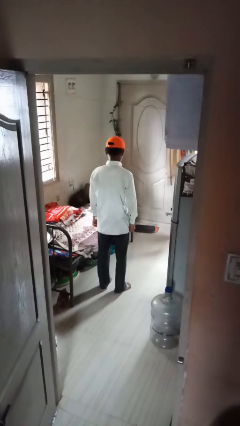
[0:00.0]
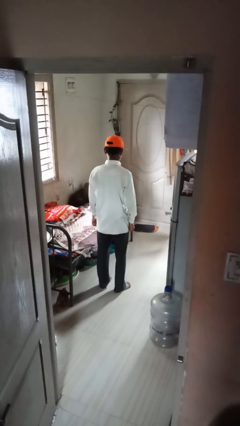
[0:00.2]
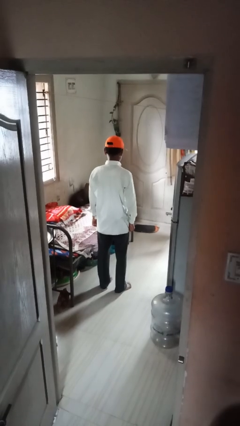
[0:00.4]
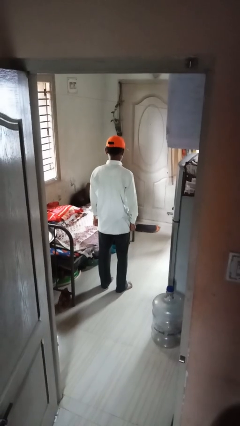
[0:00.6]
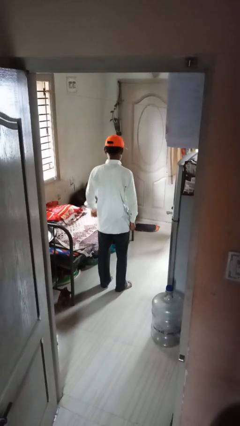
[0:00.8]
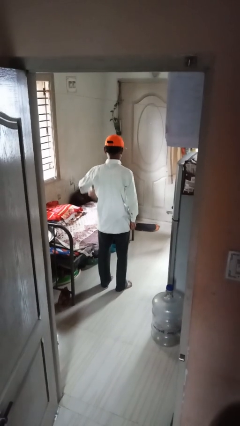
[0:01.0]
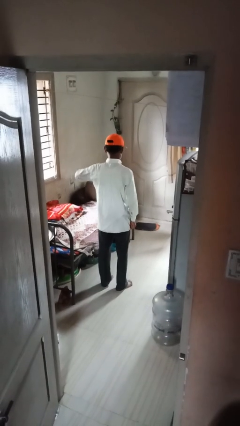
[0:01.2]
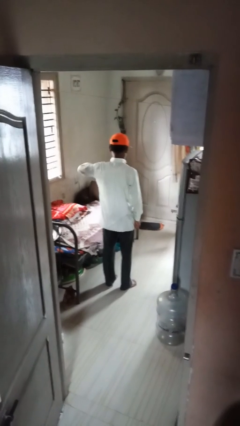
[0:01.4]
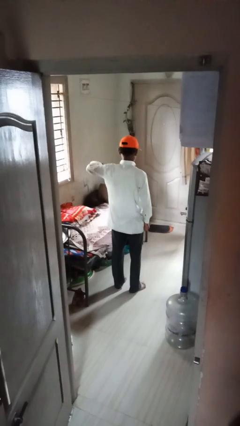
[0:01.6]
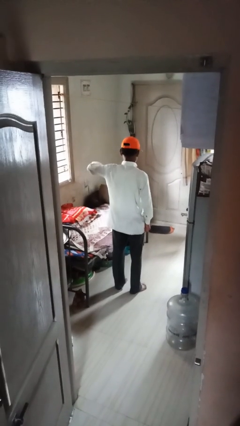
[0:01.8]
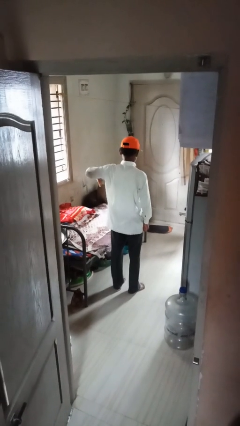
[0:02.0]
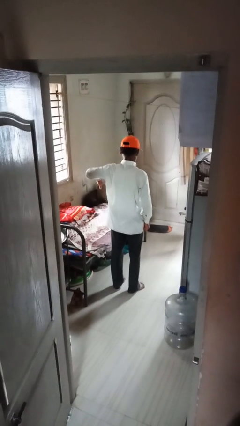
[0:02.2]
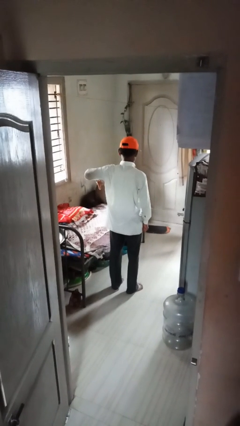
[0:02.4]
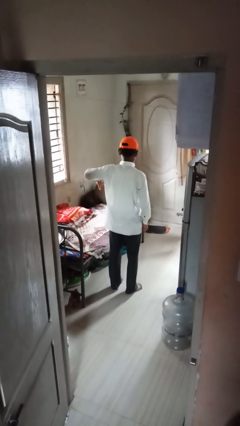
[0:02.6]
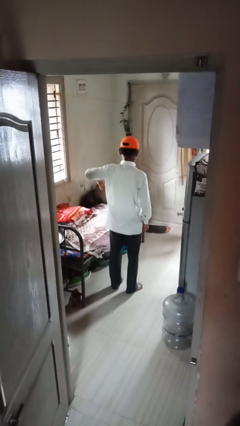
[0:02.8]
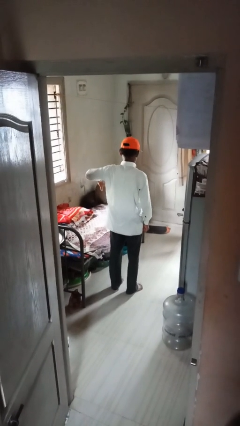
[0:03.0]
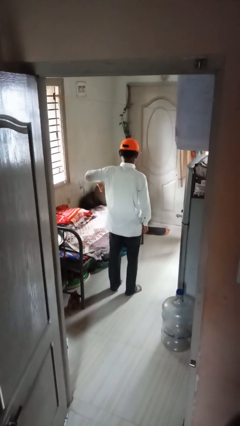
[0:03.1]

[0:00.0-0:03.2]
person gestures thumbs down

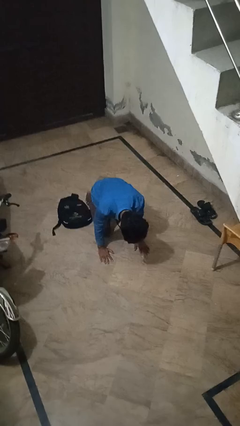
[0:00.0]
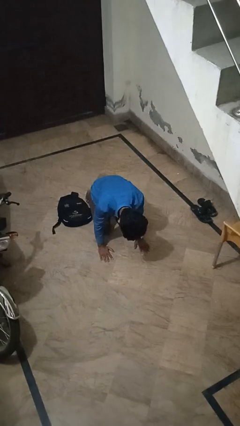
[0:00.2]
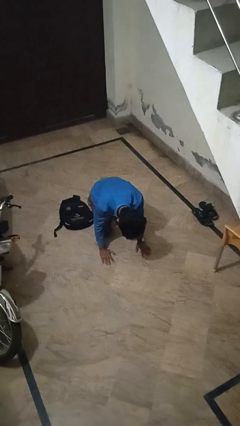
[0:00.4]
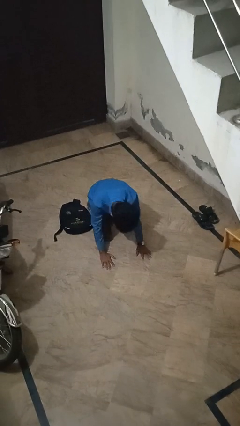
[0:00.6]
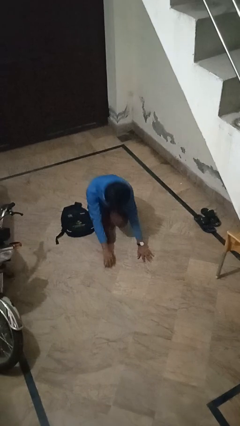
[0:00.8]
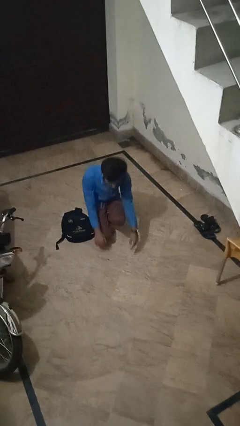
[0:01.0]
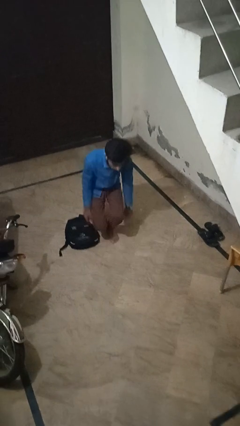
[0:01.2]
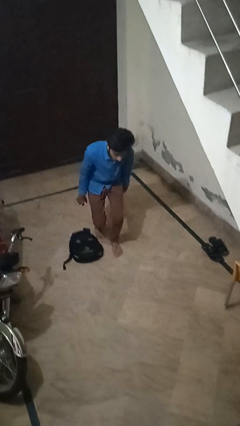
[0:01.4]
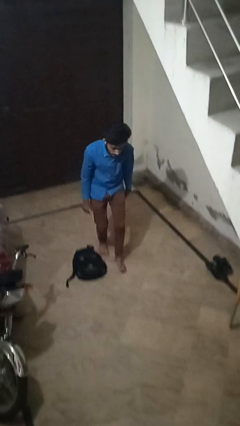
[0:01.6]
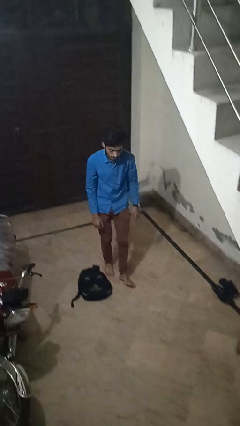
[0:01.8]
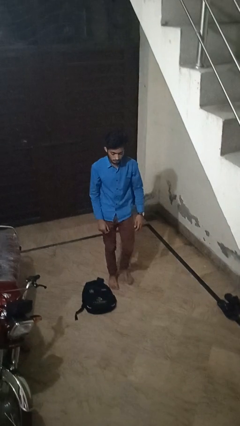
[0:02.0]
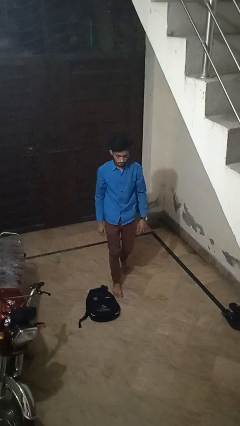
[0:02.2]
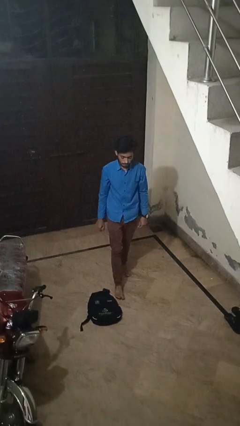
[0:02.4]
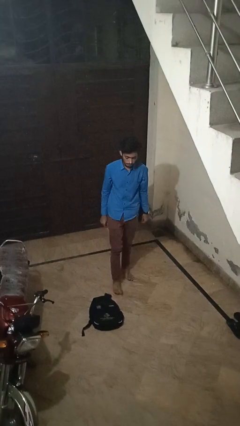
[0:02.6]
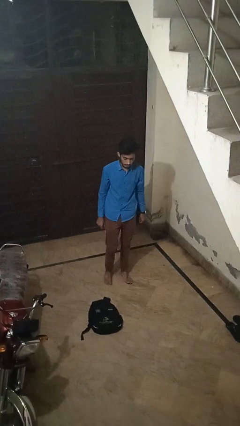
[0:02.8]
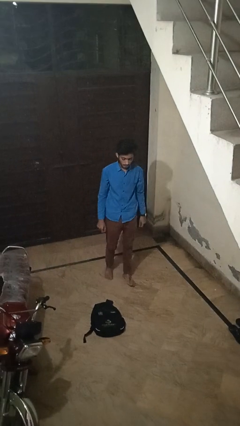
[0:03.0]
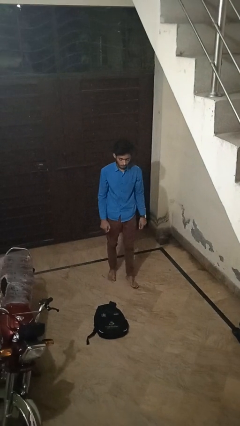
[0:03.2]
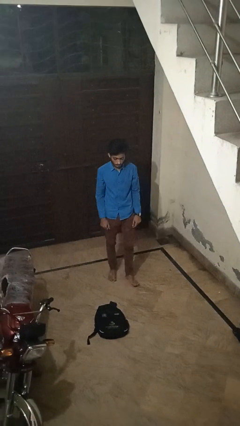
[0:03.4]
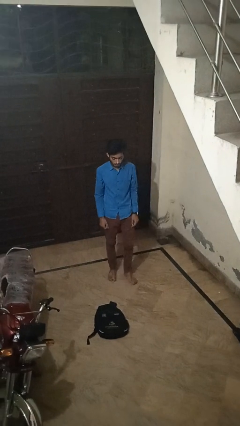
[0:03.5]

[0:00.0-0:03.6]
person stands up from floor

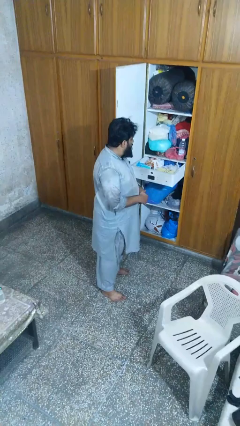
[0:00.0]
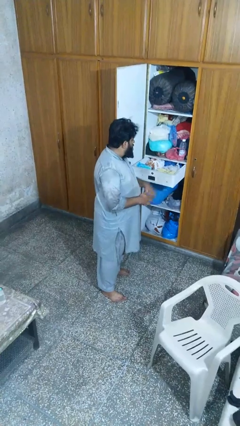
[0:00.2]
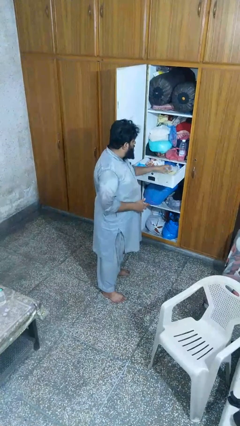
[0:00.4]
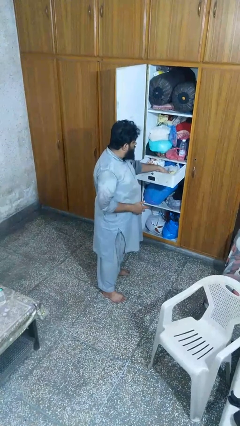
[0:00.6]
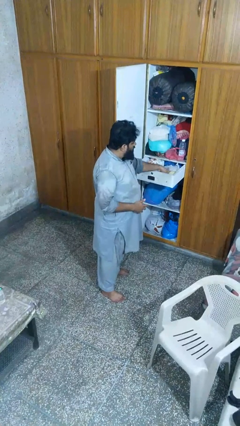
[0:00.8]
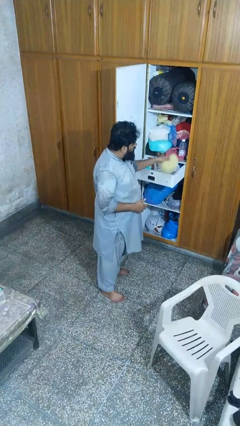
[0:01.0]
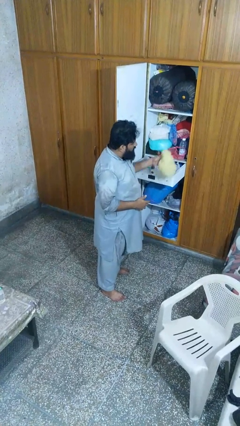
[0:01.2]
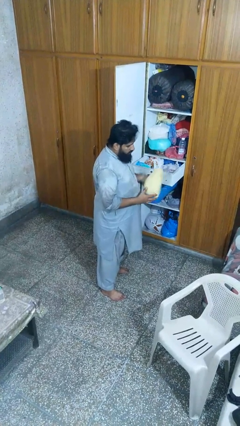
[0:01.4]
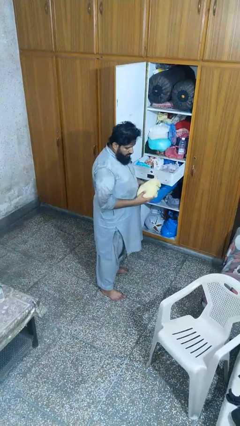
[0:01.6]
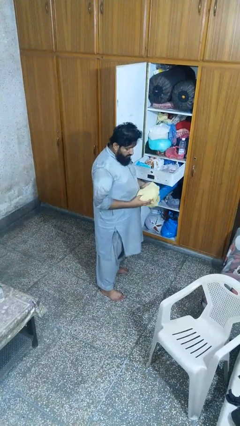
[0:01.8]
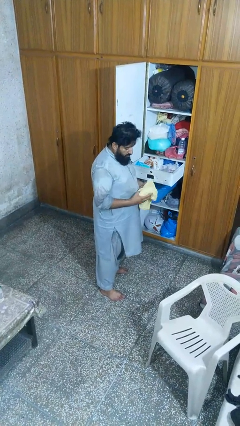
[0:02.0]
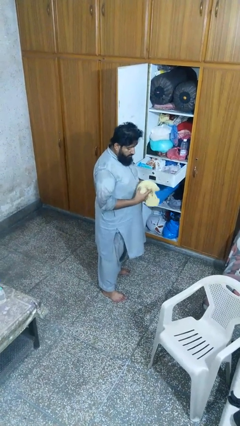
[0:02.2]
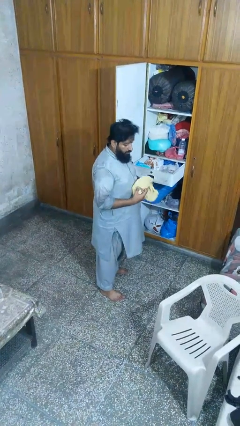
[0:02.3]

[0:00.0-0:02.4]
person takes clothes from dresser

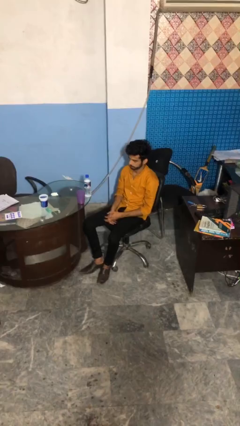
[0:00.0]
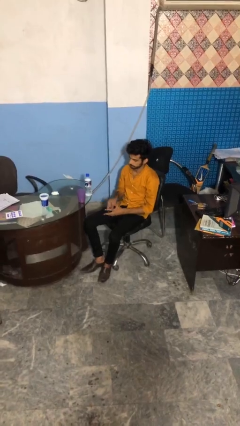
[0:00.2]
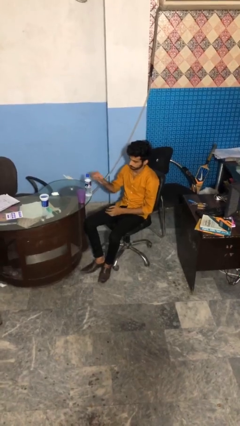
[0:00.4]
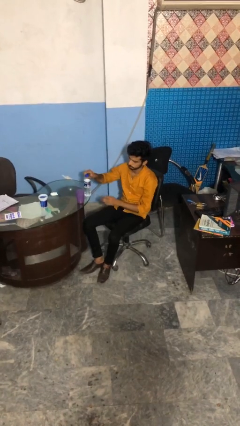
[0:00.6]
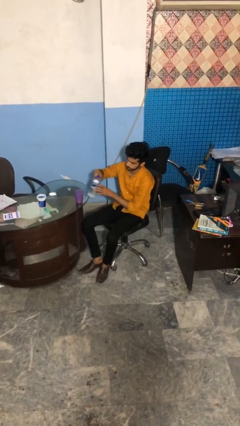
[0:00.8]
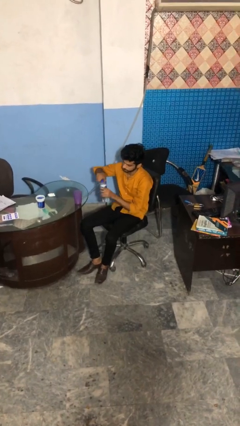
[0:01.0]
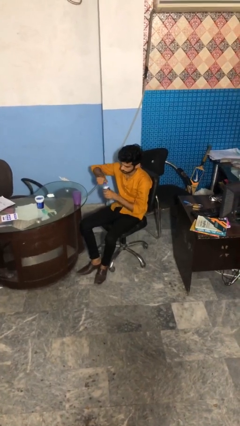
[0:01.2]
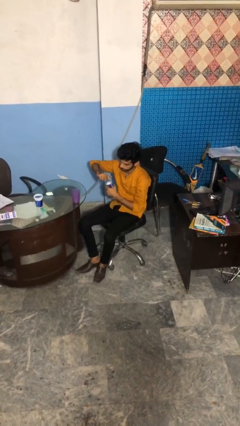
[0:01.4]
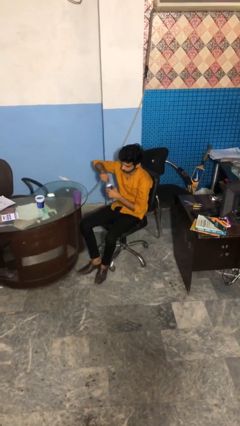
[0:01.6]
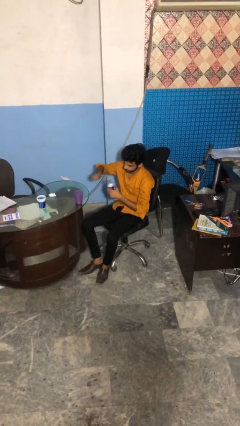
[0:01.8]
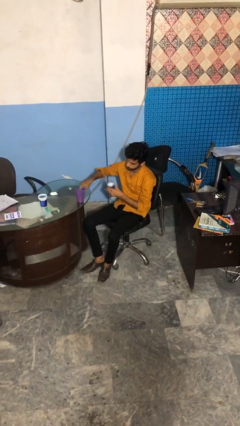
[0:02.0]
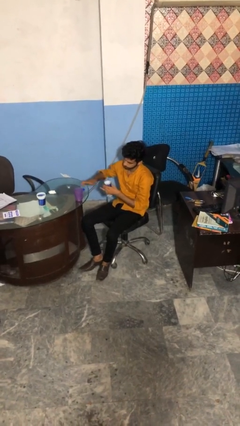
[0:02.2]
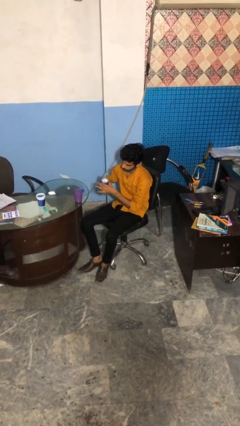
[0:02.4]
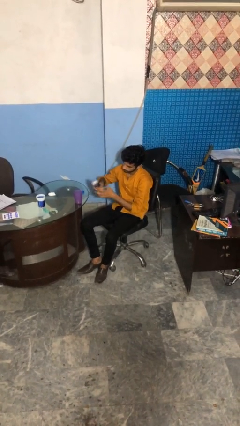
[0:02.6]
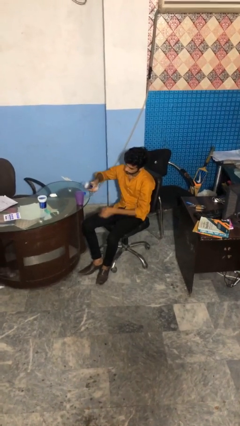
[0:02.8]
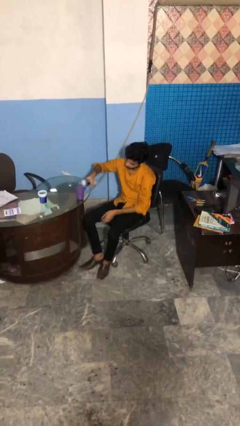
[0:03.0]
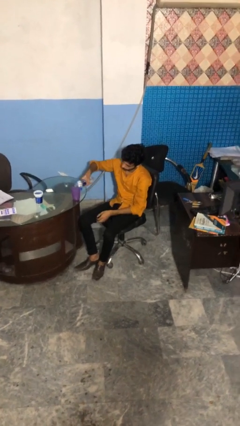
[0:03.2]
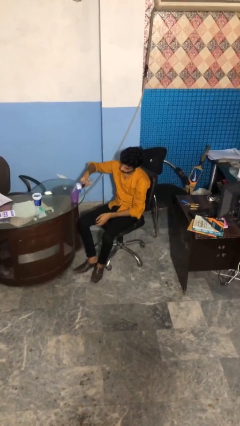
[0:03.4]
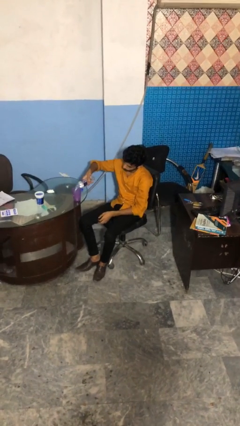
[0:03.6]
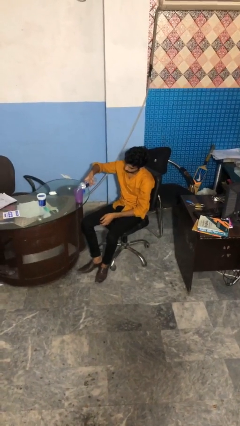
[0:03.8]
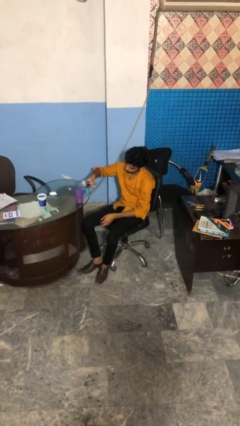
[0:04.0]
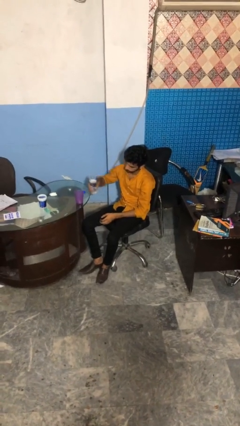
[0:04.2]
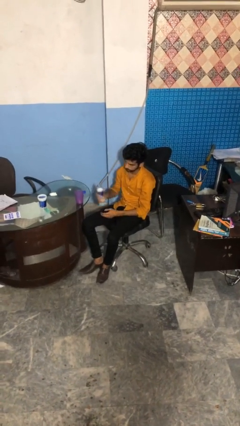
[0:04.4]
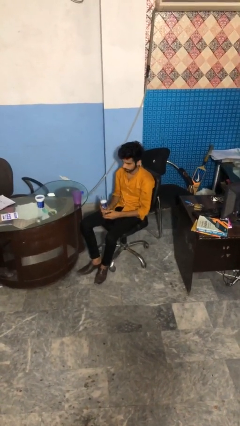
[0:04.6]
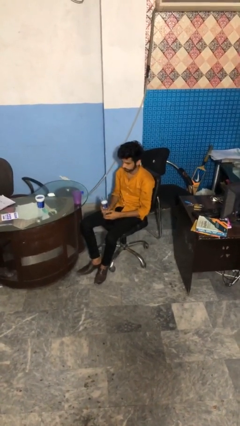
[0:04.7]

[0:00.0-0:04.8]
person pours liquid into cup

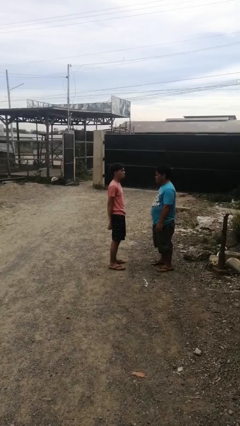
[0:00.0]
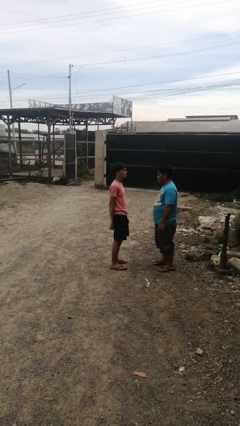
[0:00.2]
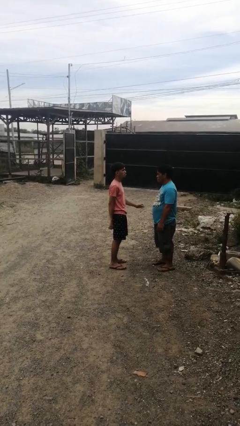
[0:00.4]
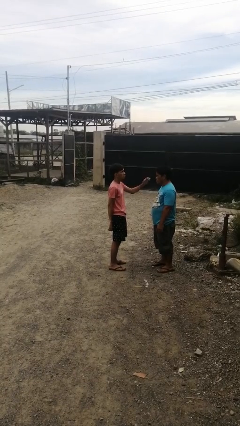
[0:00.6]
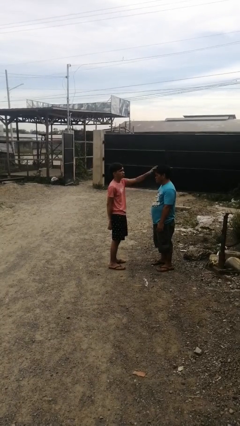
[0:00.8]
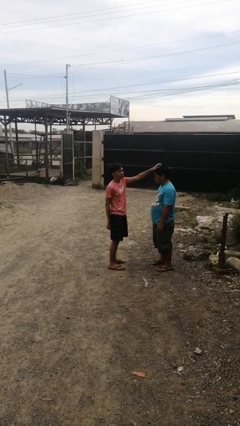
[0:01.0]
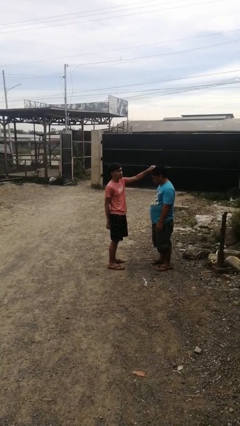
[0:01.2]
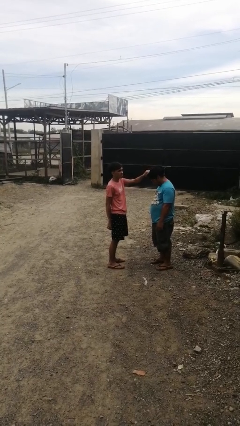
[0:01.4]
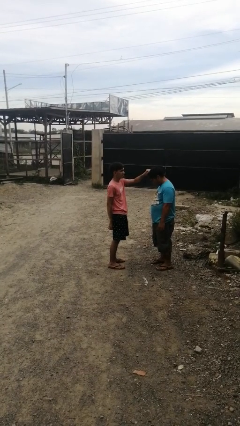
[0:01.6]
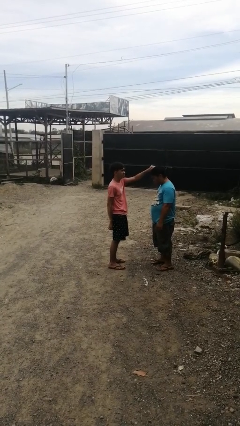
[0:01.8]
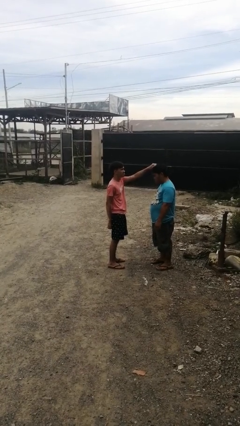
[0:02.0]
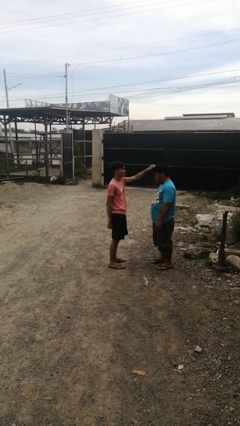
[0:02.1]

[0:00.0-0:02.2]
person grabs person by hair

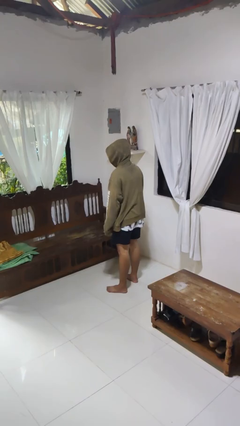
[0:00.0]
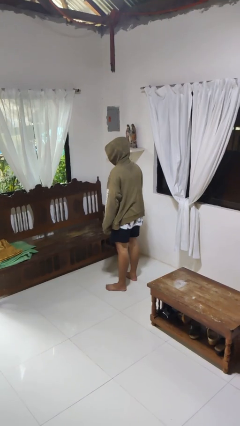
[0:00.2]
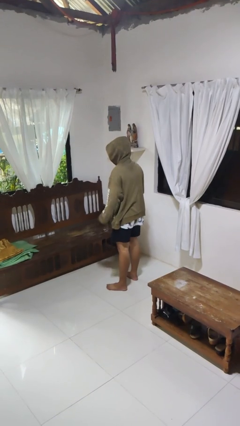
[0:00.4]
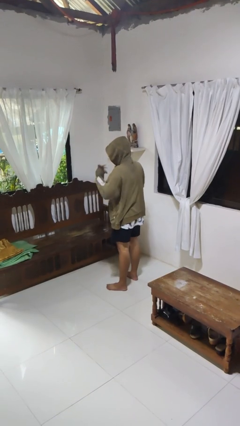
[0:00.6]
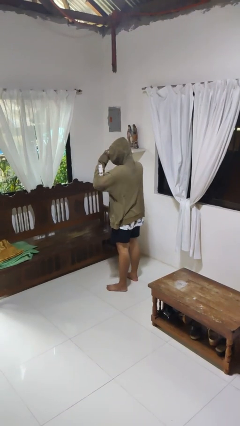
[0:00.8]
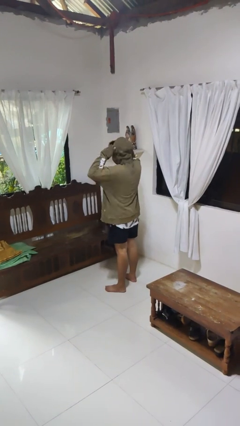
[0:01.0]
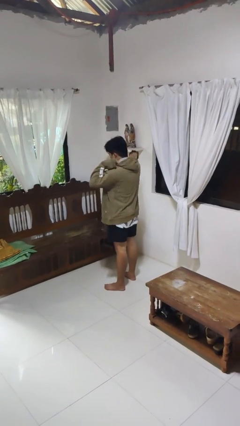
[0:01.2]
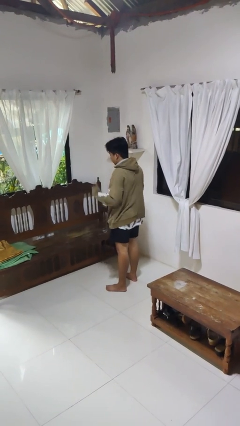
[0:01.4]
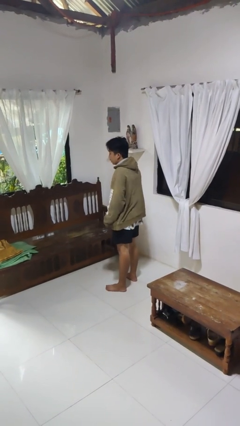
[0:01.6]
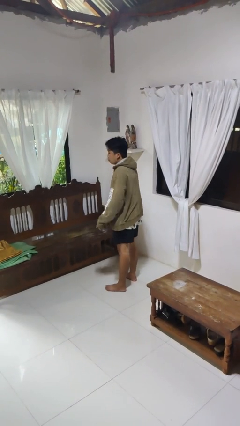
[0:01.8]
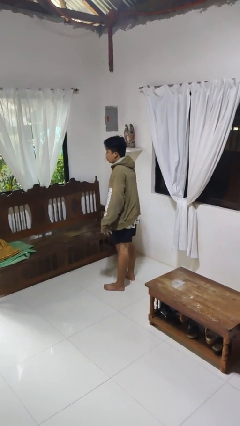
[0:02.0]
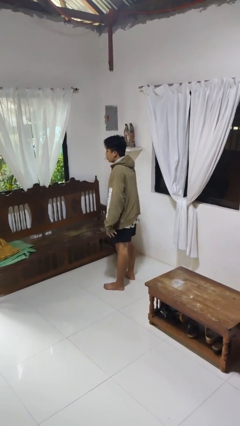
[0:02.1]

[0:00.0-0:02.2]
person takes off hoodie
